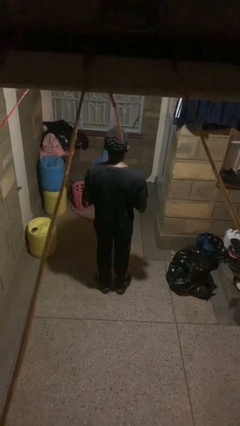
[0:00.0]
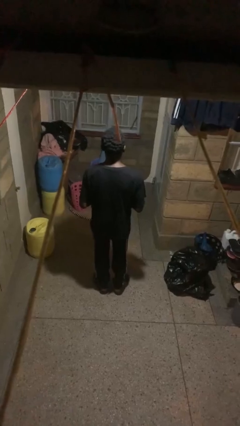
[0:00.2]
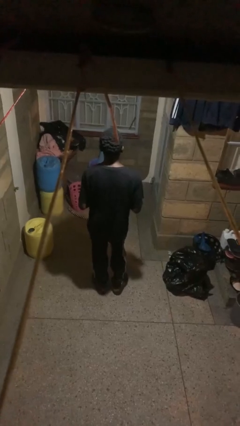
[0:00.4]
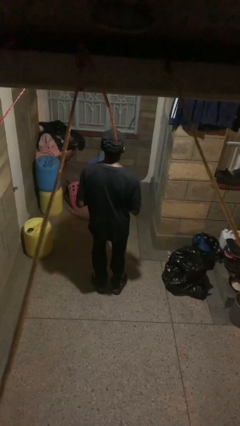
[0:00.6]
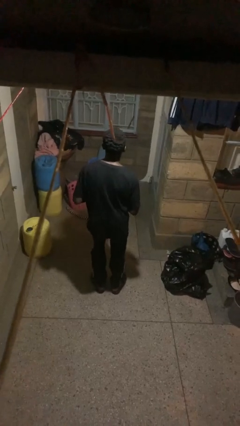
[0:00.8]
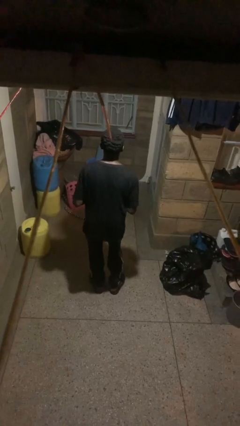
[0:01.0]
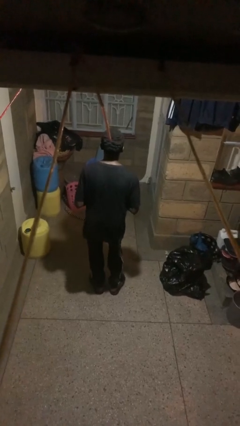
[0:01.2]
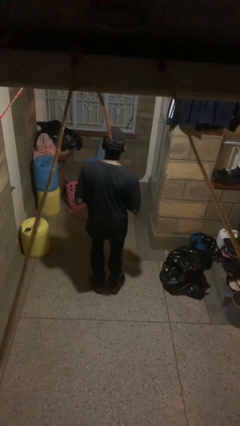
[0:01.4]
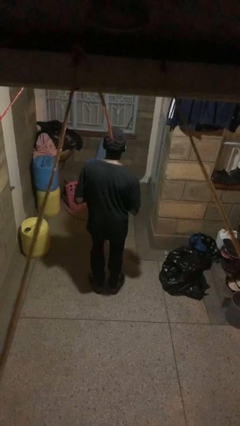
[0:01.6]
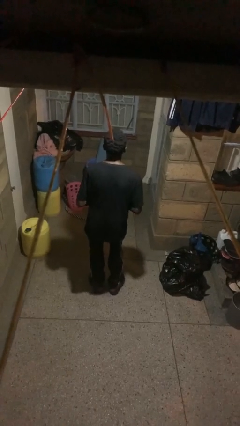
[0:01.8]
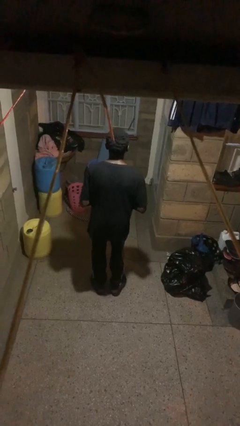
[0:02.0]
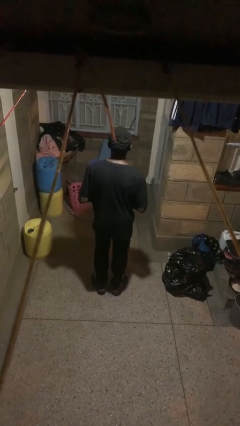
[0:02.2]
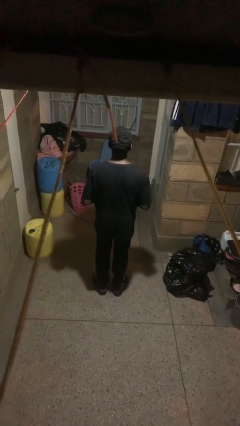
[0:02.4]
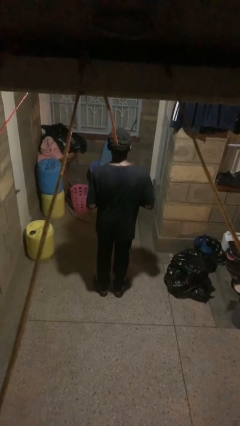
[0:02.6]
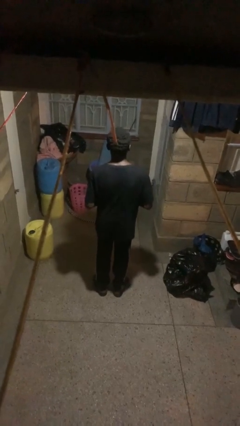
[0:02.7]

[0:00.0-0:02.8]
person wiggles hips

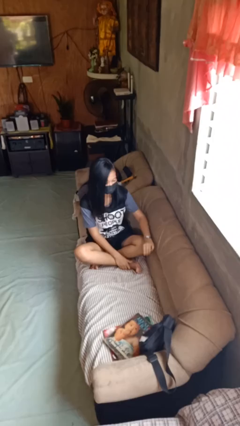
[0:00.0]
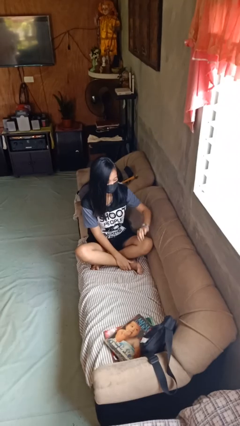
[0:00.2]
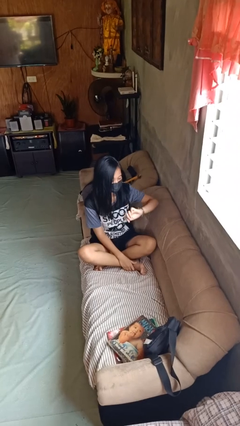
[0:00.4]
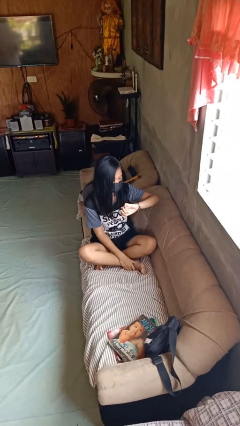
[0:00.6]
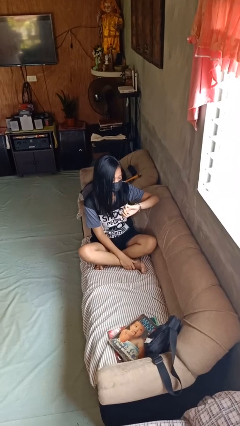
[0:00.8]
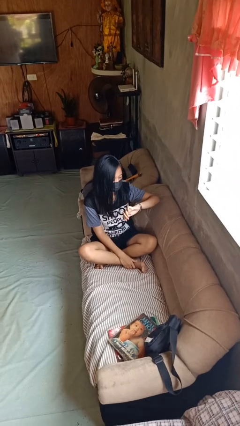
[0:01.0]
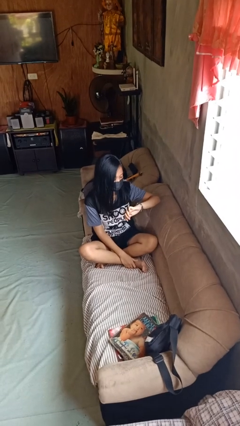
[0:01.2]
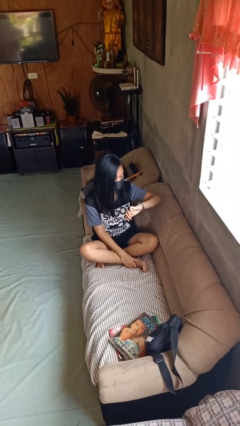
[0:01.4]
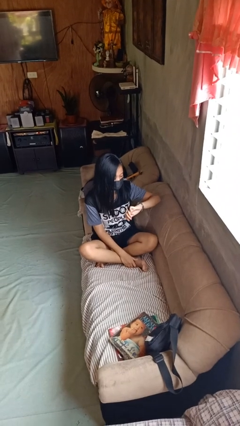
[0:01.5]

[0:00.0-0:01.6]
person looks at wristwatch

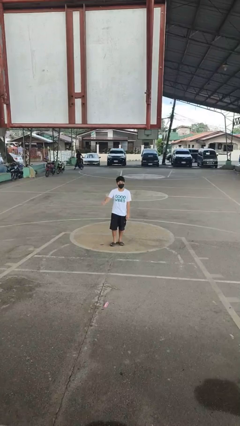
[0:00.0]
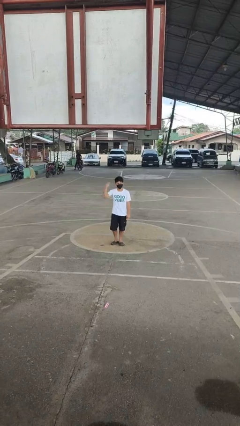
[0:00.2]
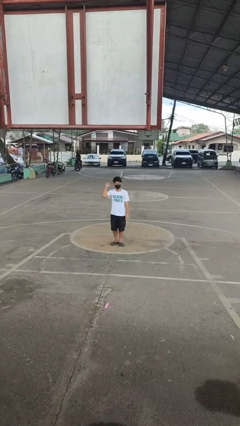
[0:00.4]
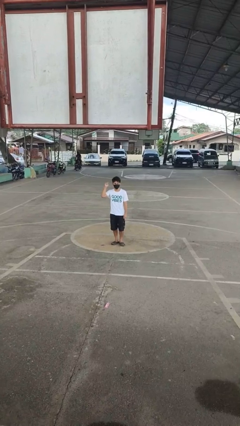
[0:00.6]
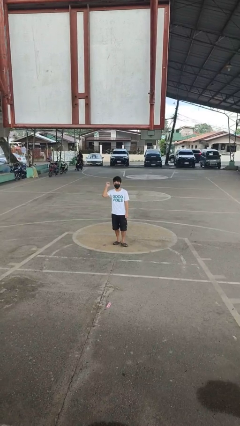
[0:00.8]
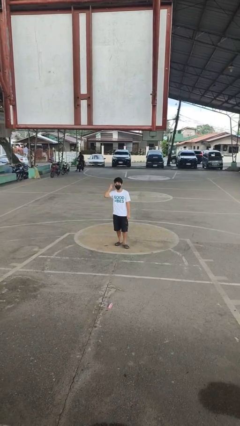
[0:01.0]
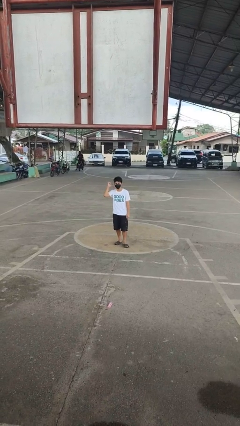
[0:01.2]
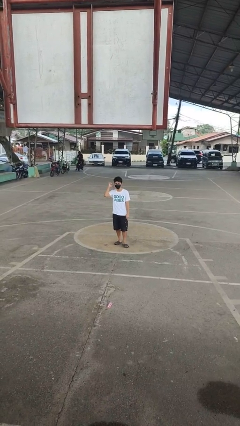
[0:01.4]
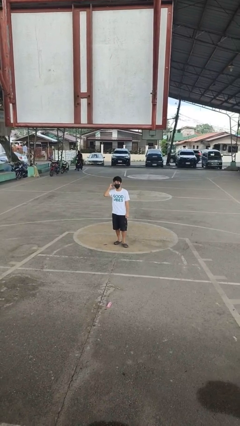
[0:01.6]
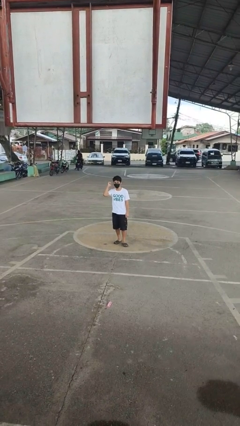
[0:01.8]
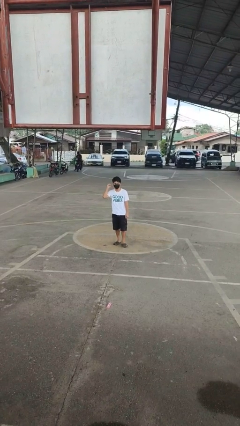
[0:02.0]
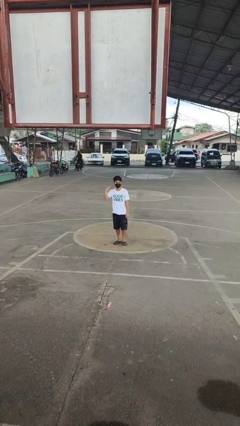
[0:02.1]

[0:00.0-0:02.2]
person gestures behind me

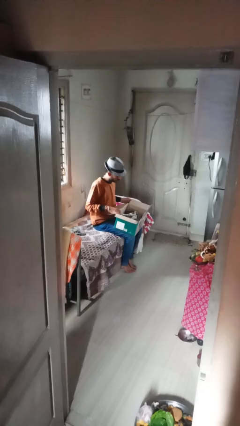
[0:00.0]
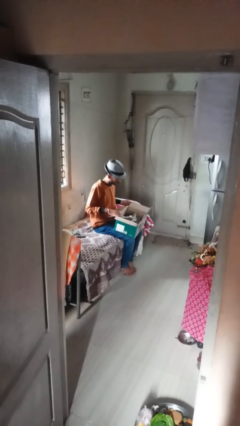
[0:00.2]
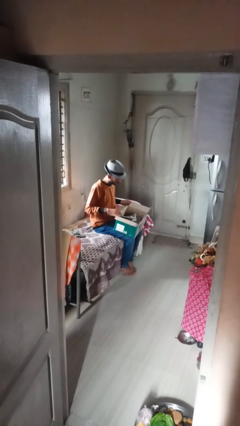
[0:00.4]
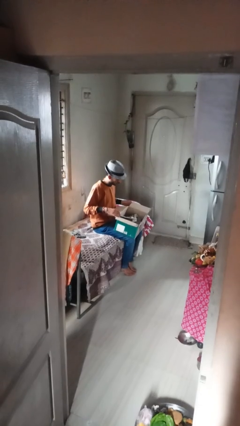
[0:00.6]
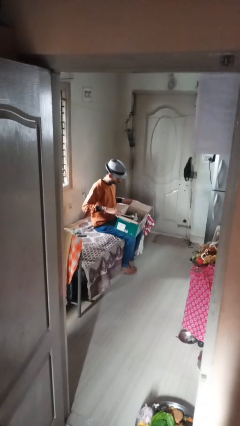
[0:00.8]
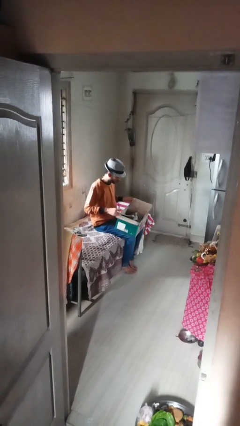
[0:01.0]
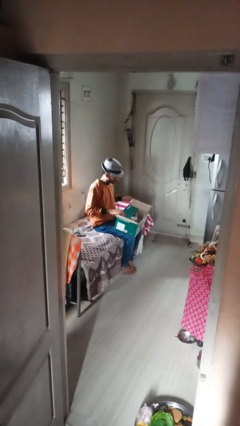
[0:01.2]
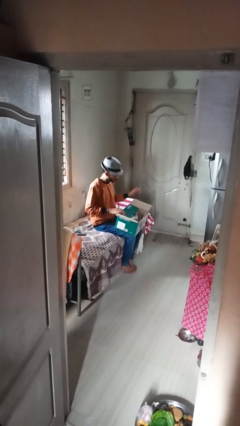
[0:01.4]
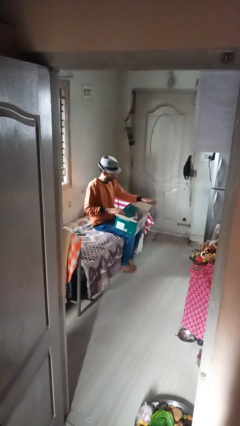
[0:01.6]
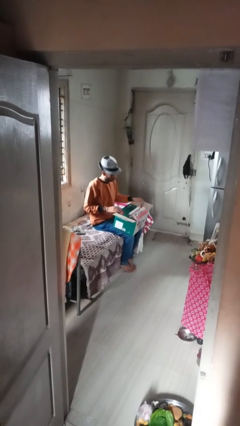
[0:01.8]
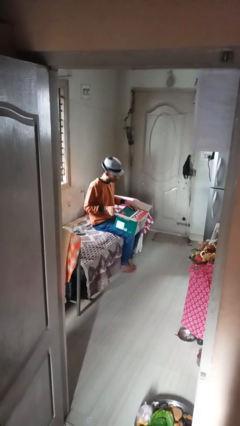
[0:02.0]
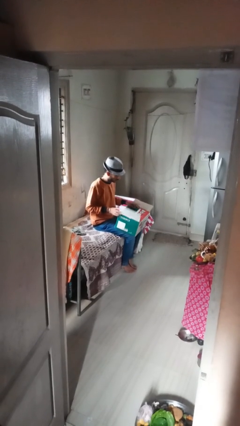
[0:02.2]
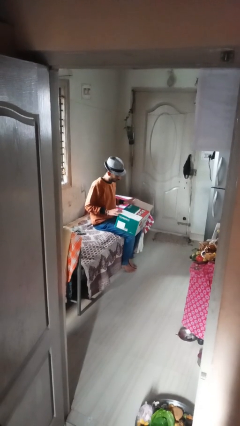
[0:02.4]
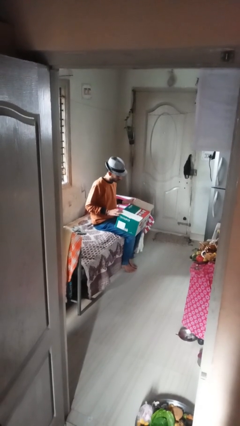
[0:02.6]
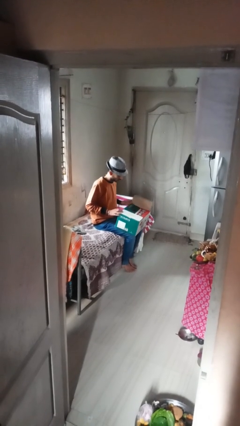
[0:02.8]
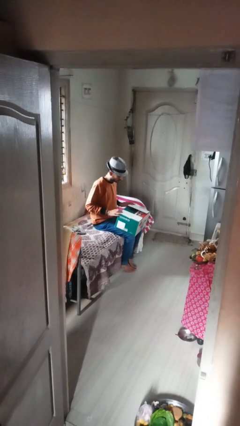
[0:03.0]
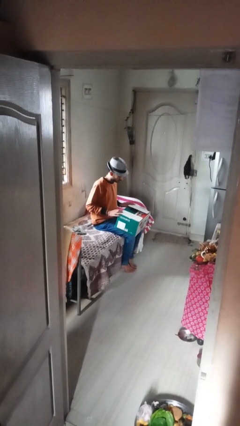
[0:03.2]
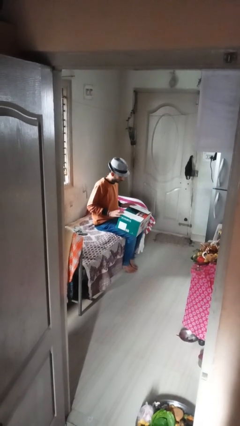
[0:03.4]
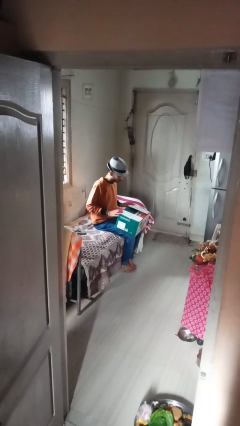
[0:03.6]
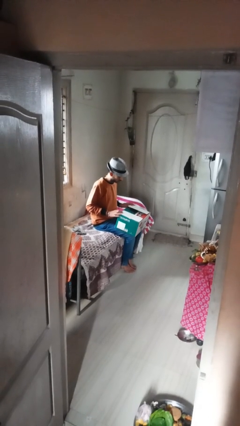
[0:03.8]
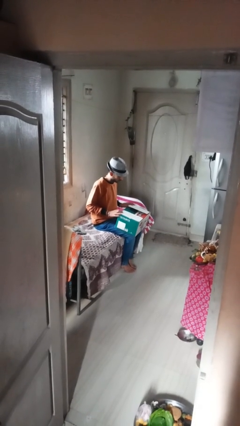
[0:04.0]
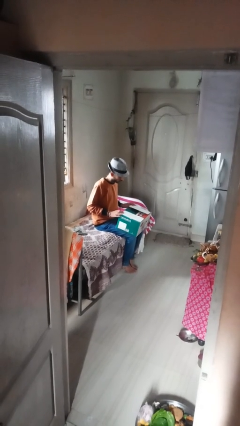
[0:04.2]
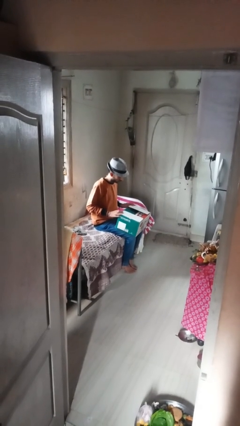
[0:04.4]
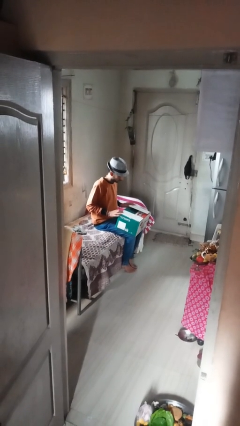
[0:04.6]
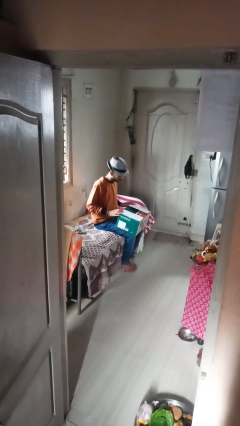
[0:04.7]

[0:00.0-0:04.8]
person closes box

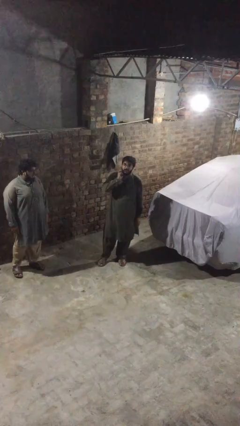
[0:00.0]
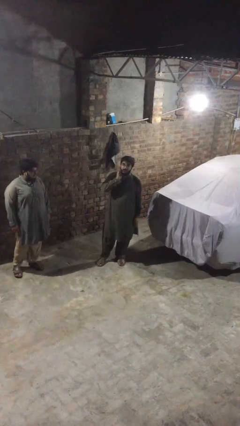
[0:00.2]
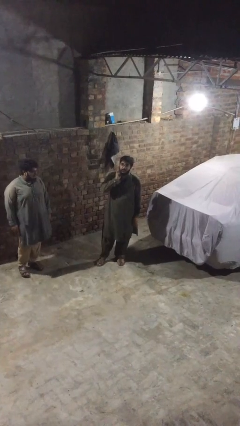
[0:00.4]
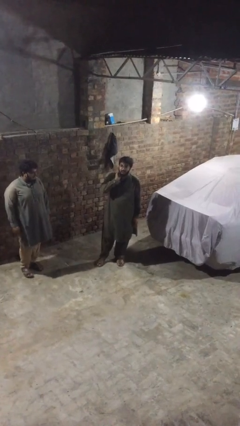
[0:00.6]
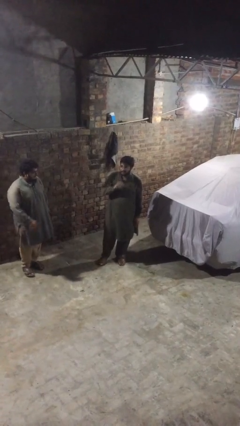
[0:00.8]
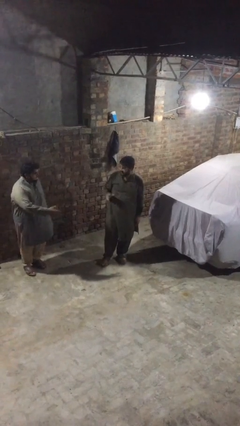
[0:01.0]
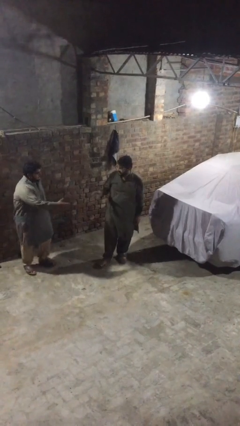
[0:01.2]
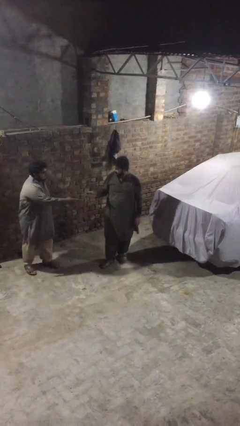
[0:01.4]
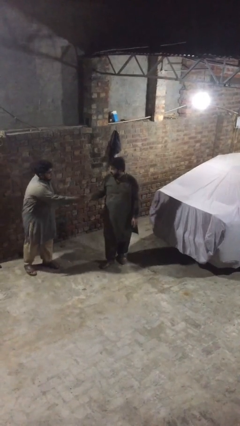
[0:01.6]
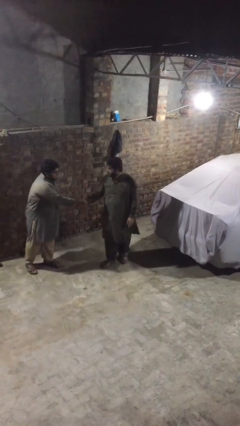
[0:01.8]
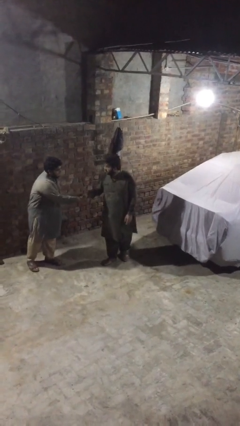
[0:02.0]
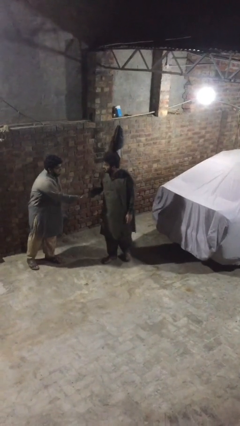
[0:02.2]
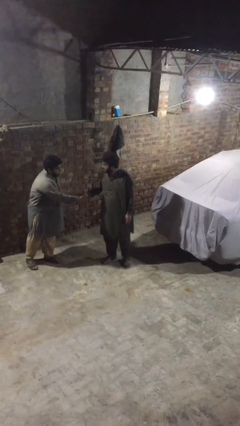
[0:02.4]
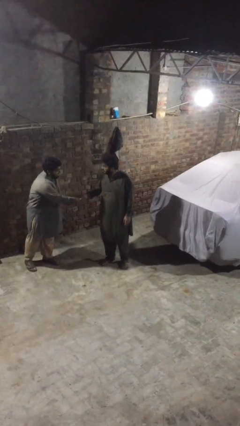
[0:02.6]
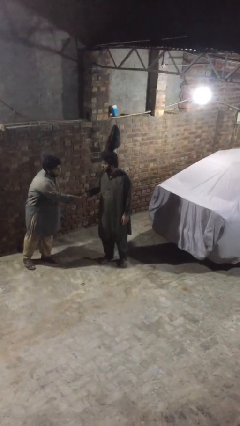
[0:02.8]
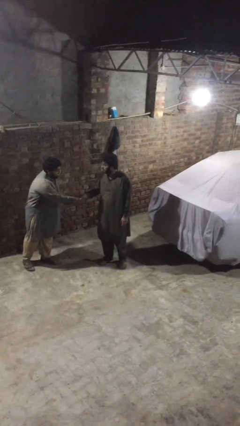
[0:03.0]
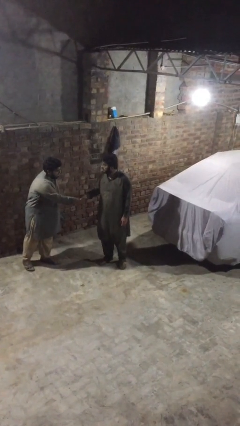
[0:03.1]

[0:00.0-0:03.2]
person shakes hand

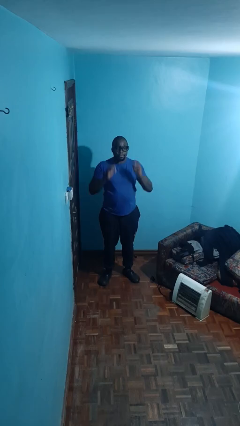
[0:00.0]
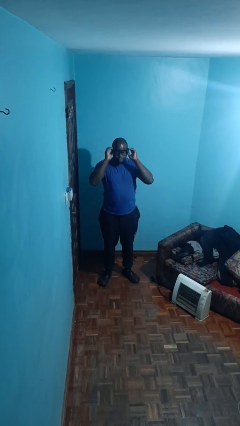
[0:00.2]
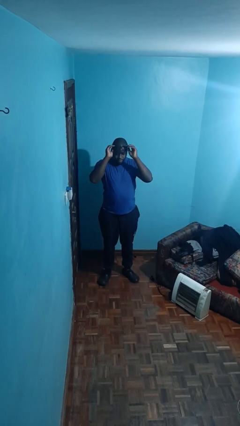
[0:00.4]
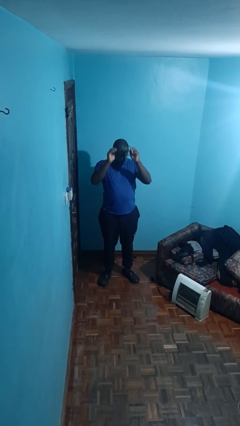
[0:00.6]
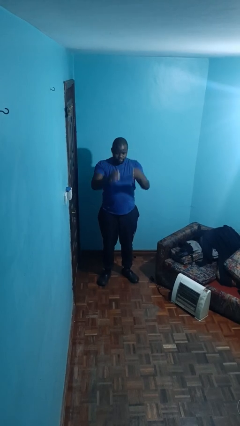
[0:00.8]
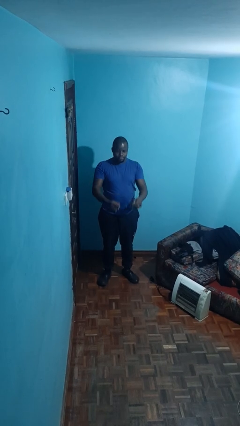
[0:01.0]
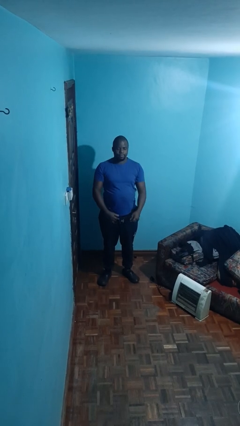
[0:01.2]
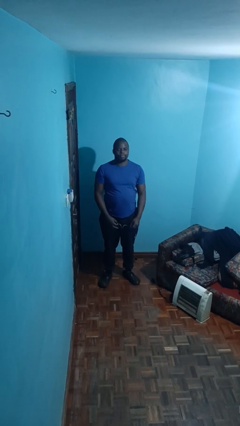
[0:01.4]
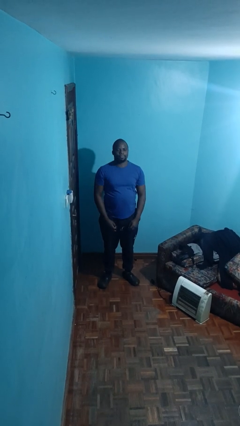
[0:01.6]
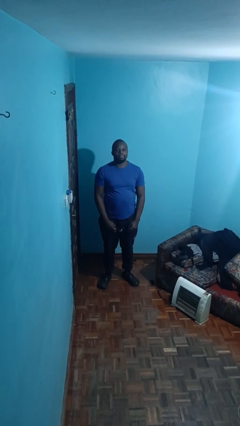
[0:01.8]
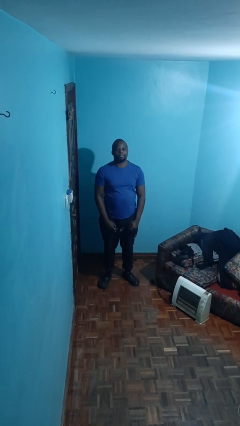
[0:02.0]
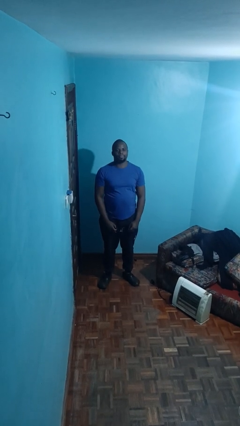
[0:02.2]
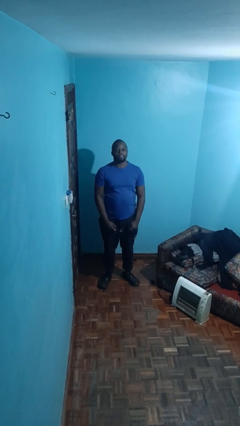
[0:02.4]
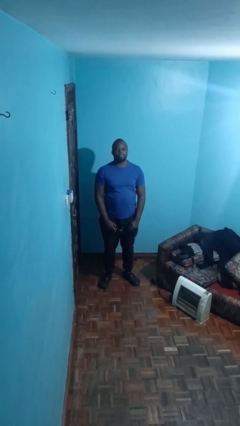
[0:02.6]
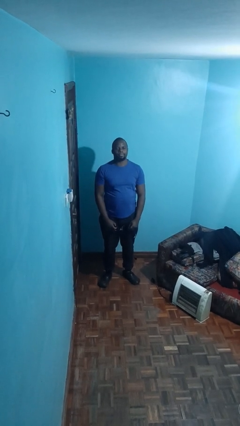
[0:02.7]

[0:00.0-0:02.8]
person takes off glasses
